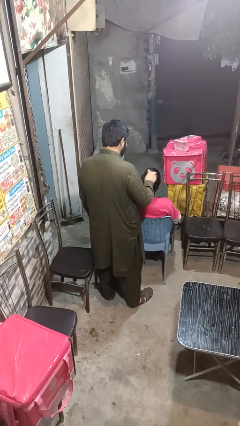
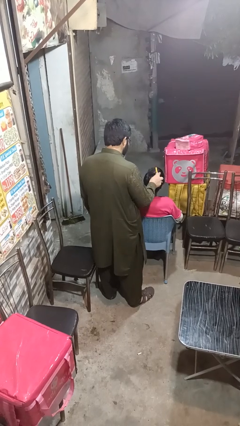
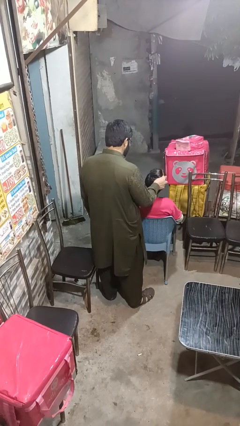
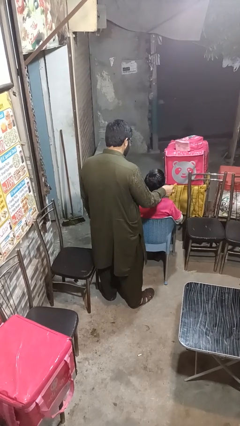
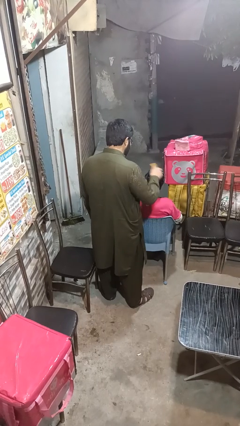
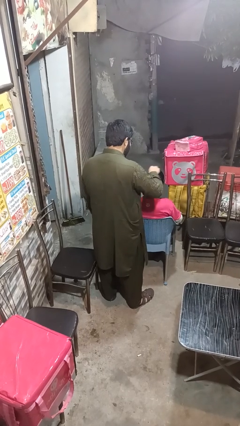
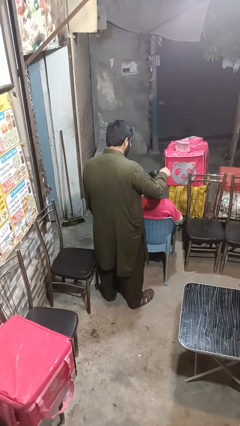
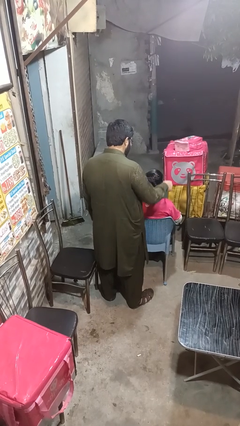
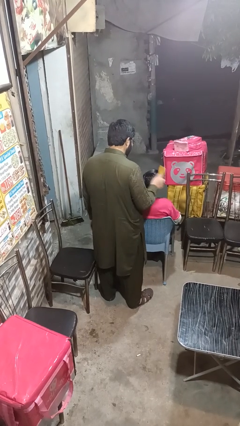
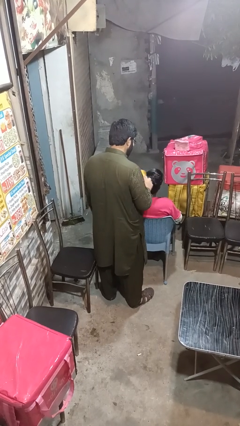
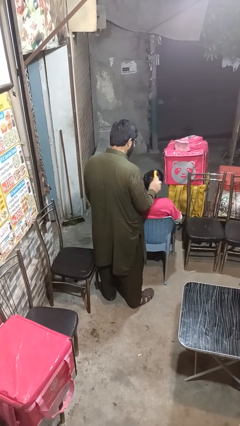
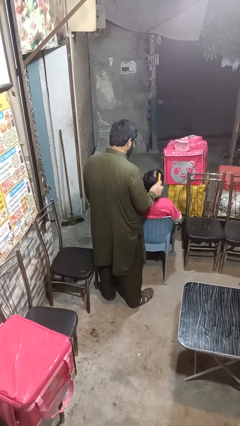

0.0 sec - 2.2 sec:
person brushes hair of person

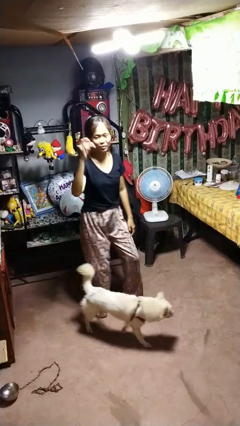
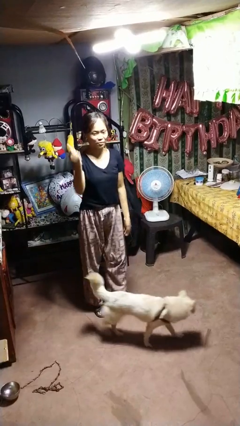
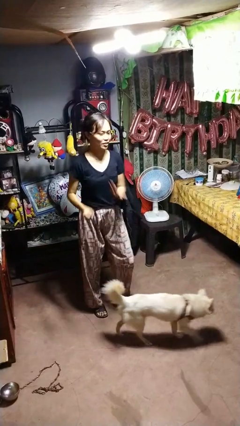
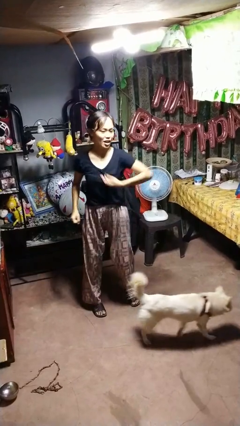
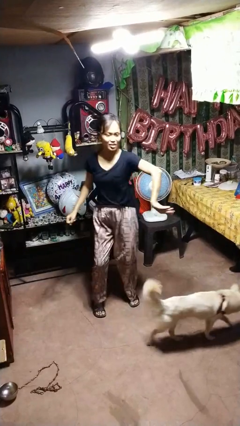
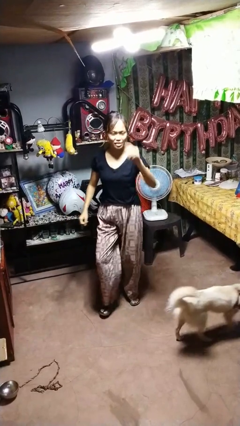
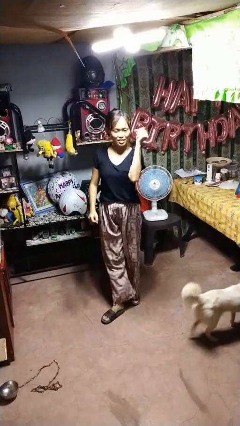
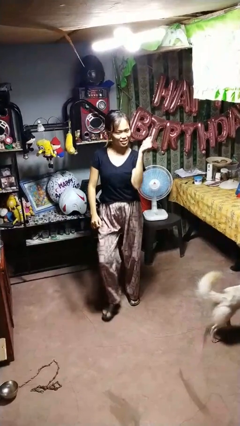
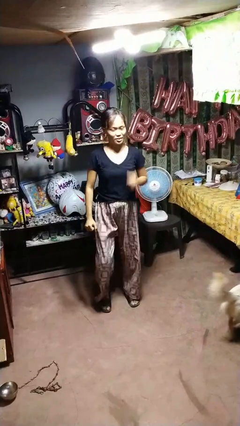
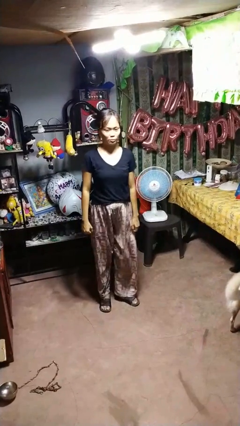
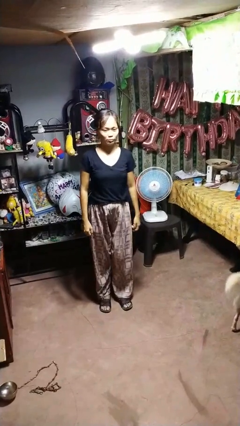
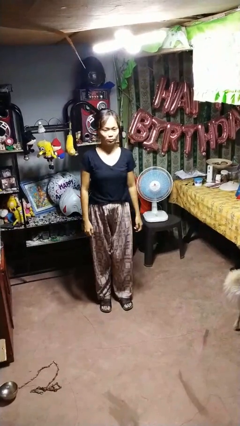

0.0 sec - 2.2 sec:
person dances in place

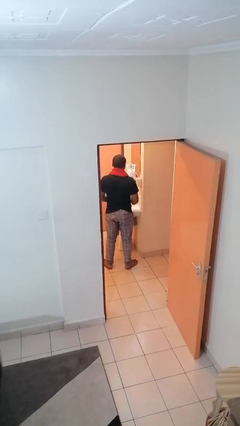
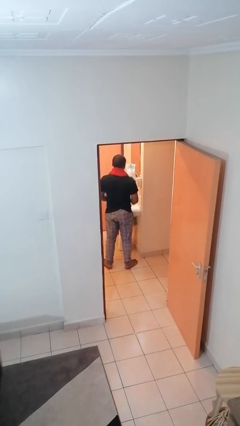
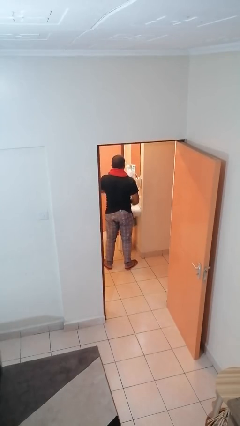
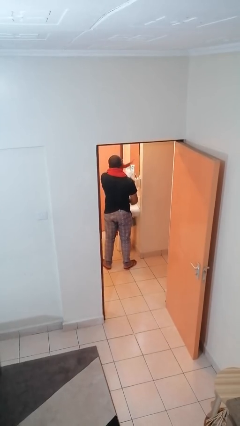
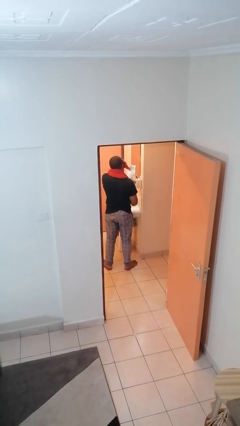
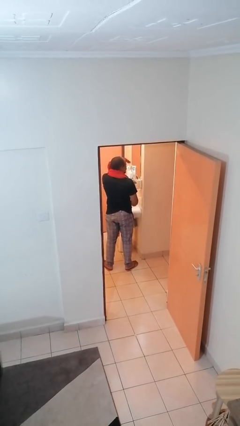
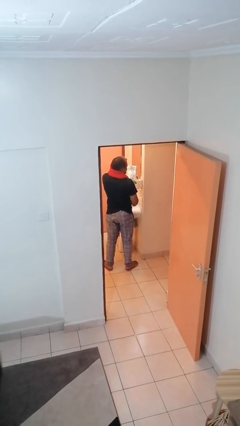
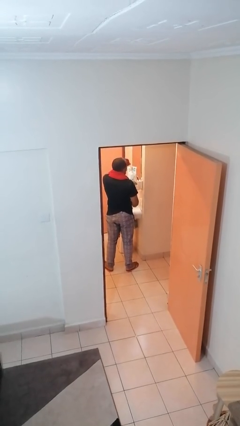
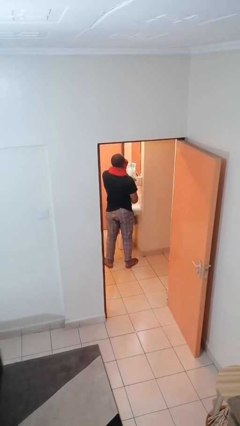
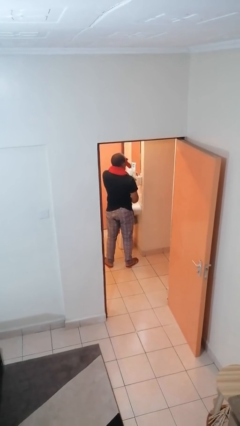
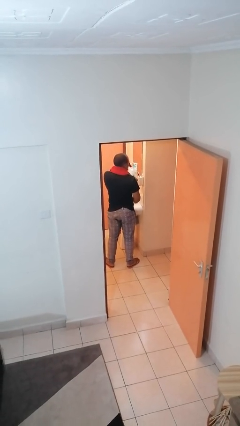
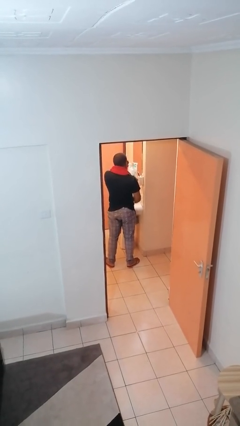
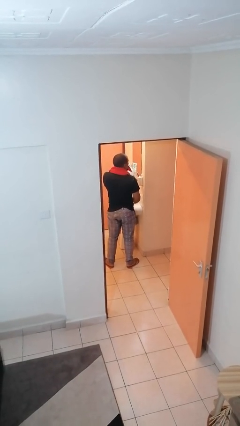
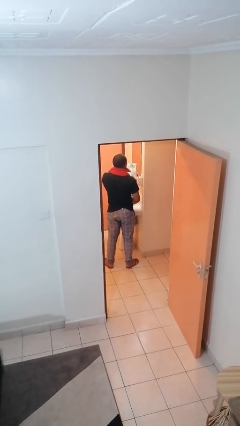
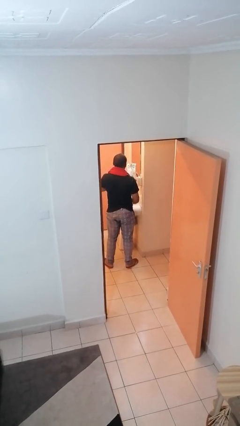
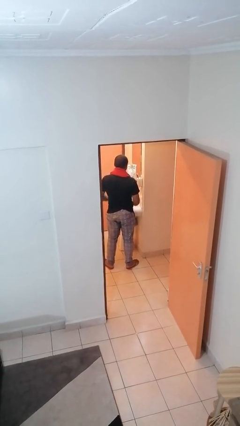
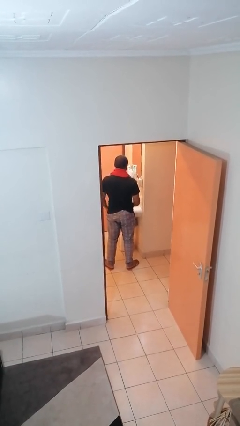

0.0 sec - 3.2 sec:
person dries face with towel

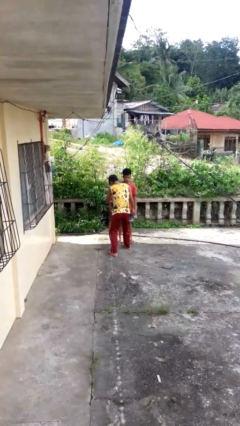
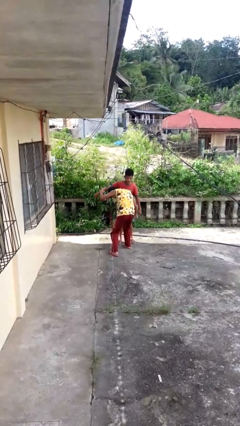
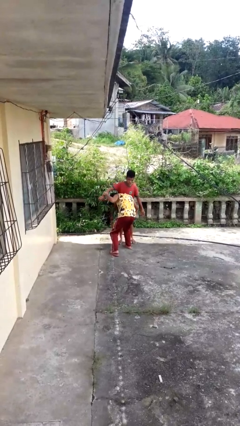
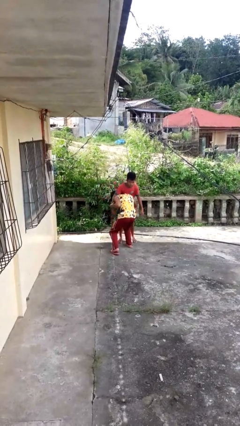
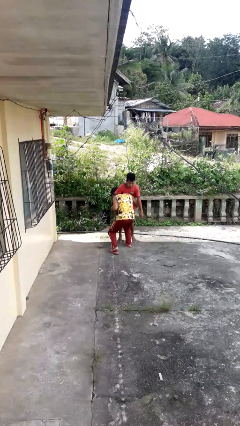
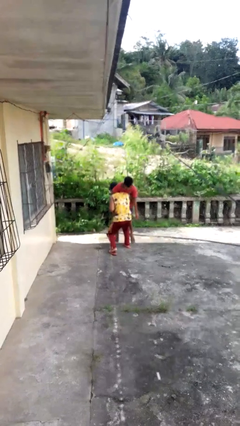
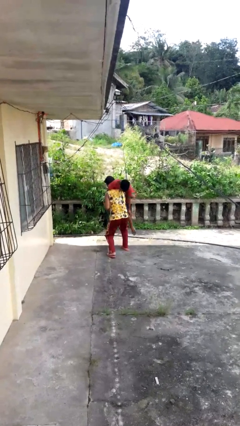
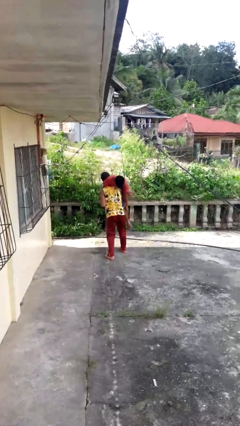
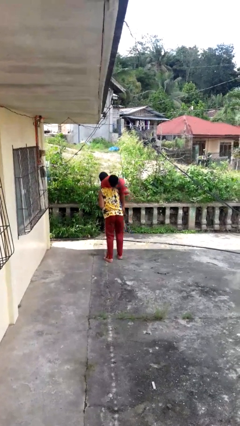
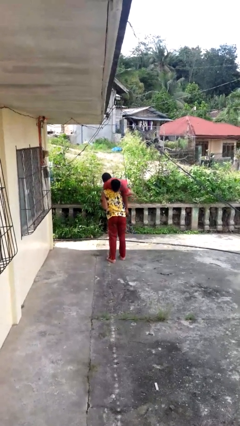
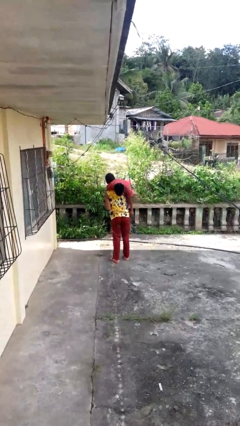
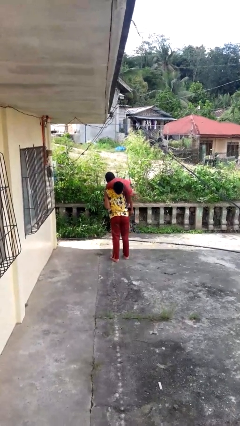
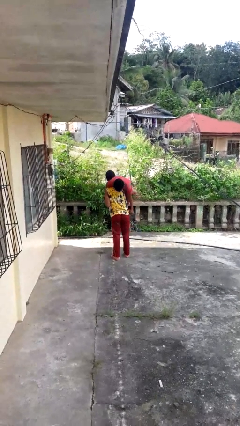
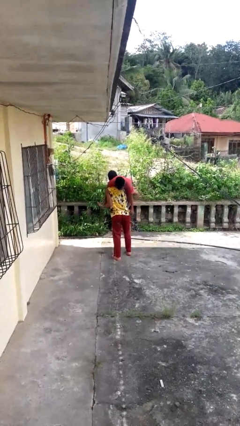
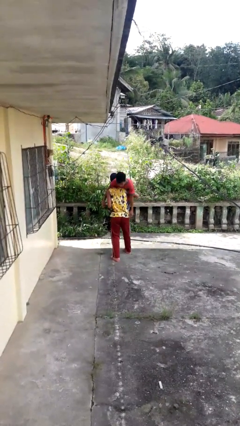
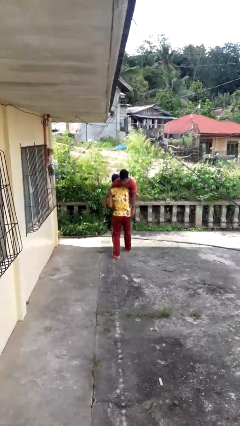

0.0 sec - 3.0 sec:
person carries person over shoulder

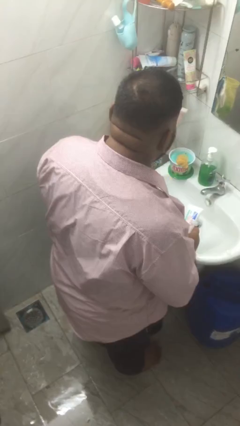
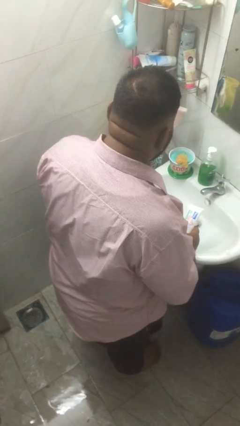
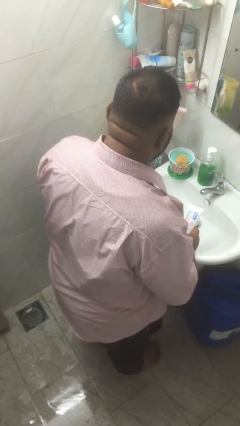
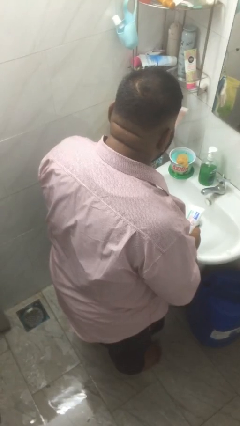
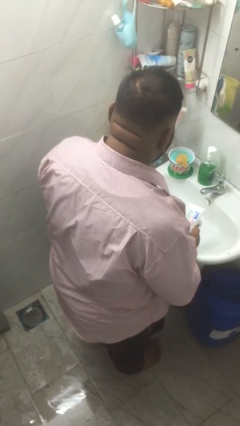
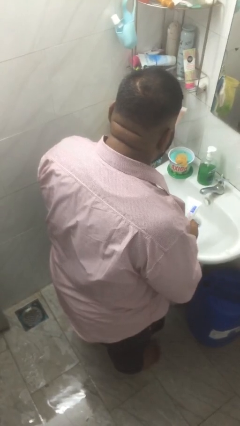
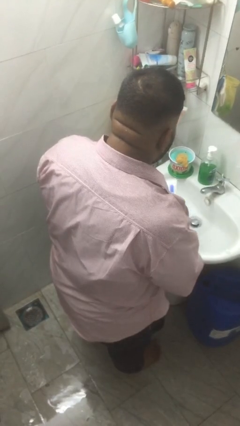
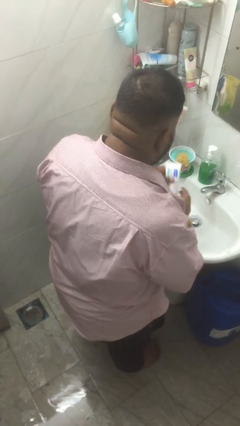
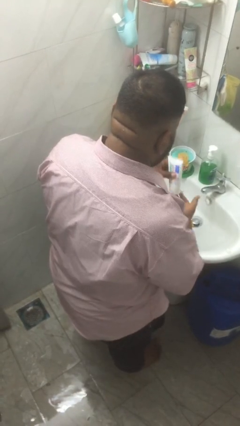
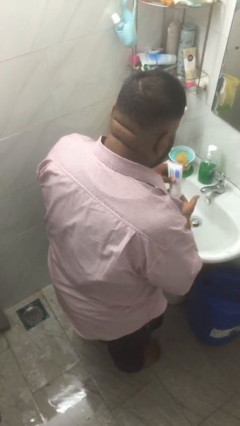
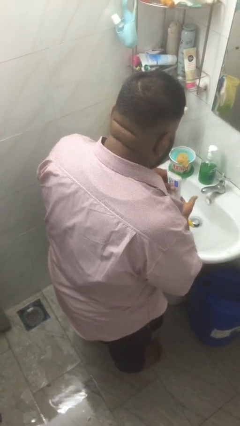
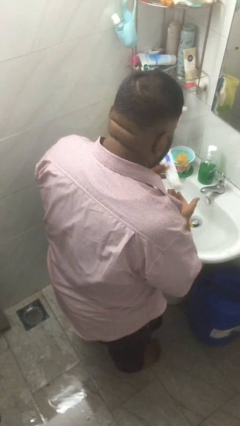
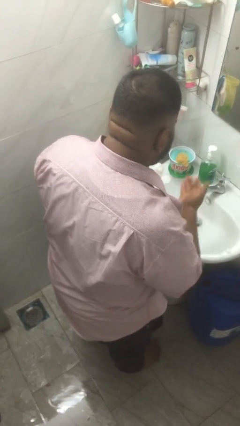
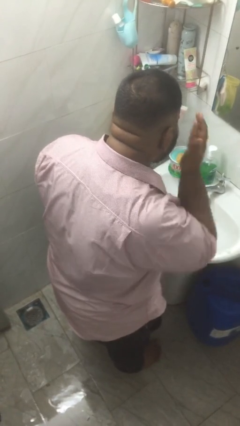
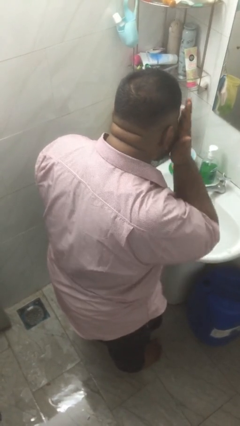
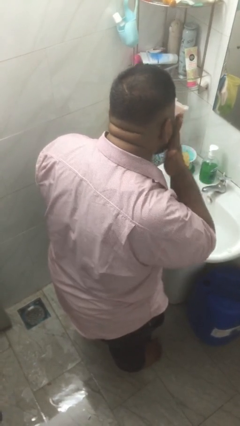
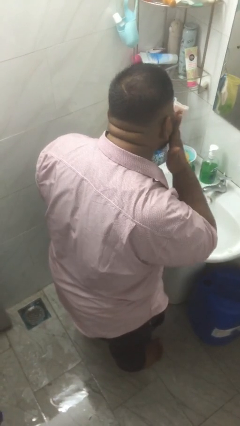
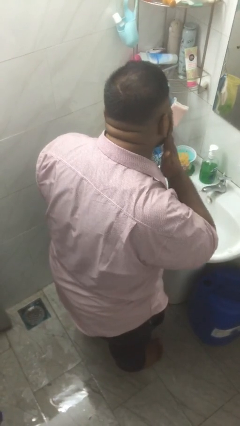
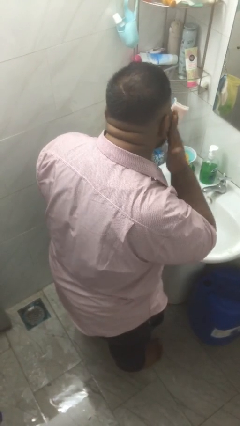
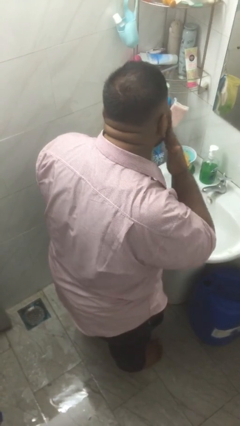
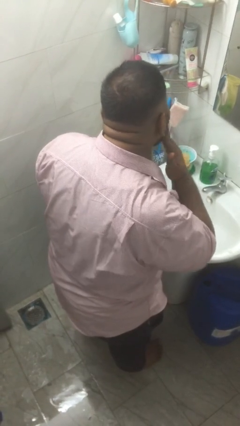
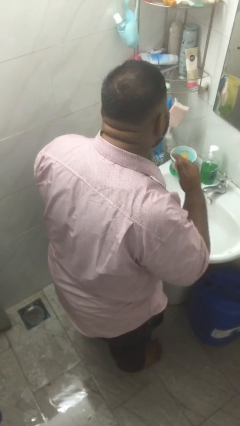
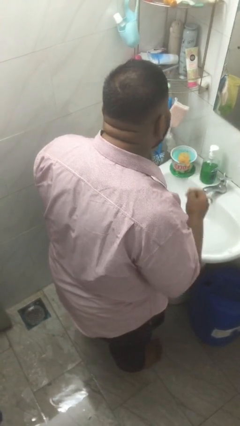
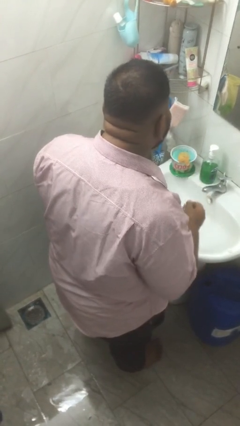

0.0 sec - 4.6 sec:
person applies shaving cream

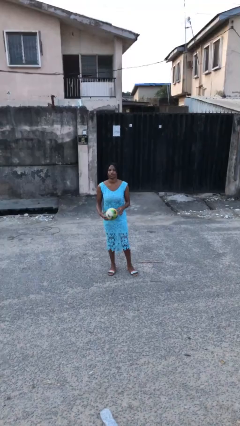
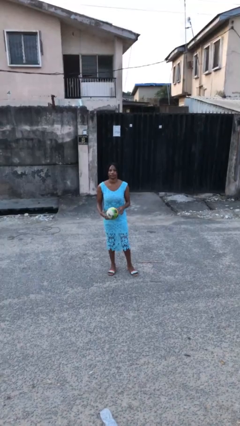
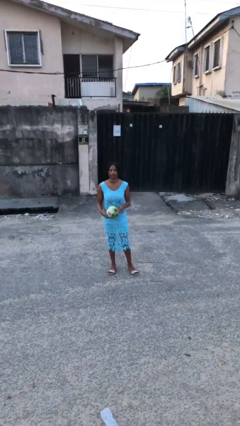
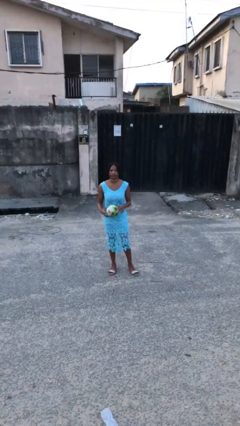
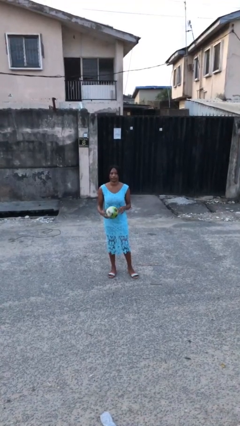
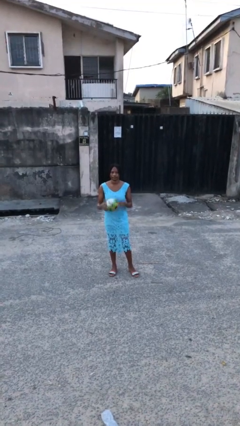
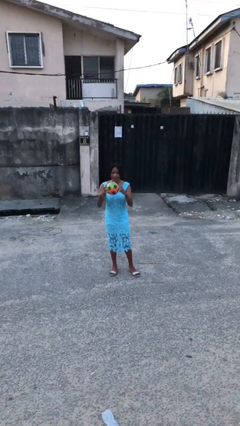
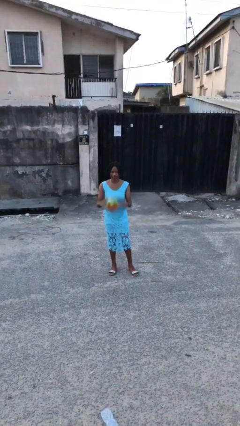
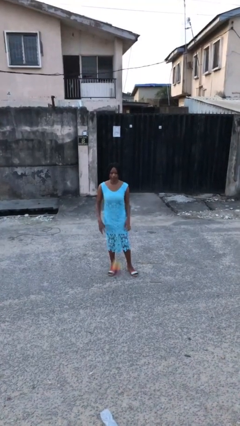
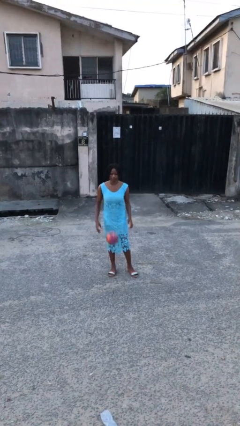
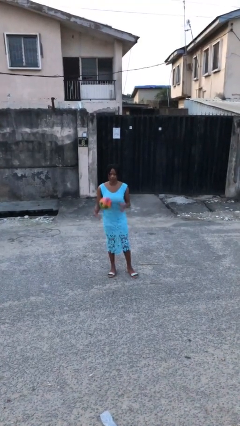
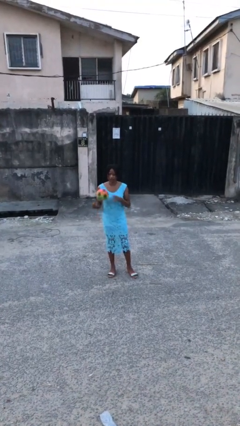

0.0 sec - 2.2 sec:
person bounces ball on floor
